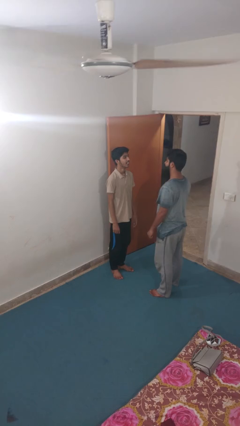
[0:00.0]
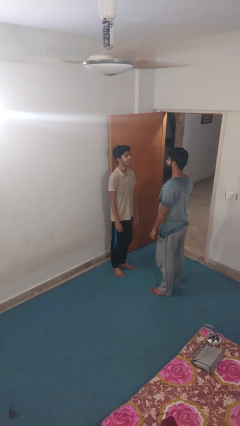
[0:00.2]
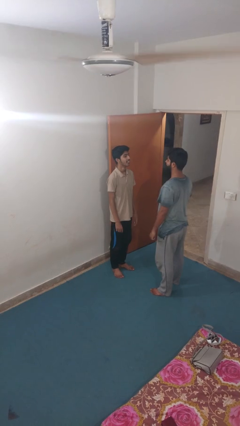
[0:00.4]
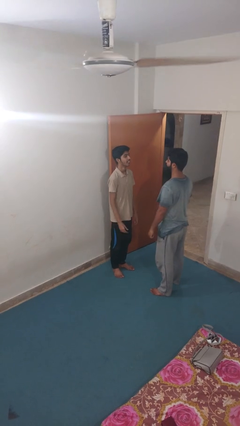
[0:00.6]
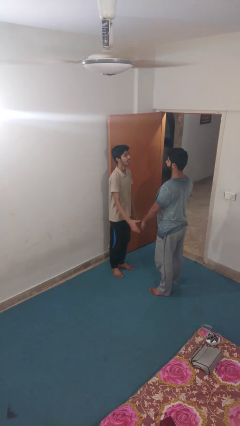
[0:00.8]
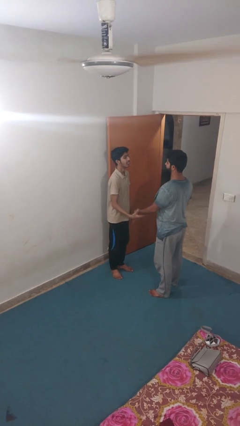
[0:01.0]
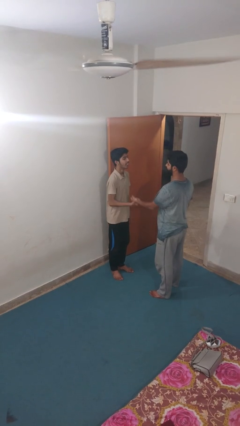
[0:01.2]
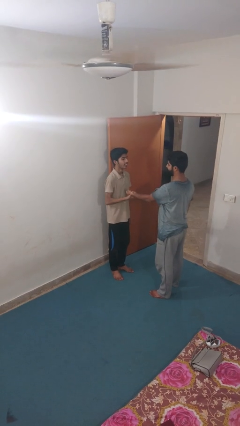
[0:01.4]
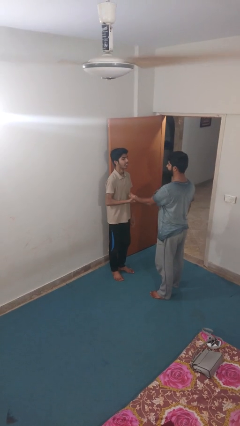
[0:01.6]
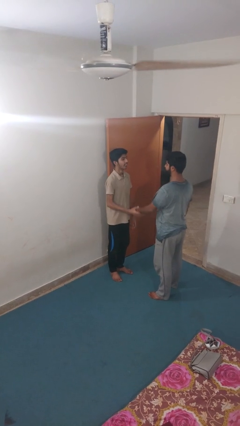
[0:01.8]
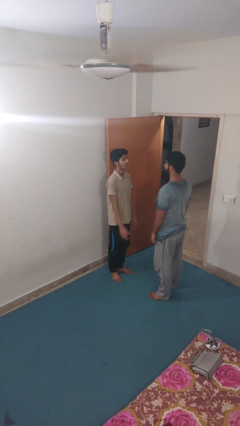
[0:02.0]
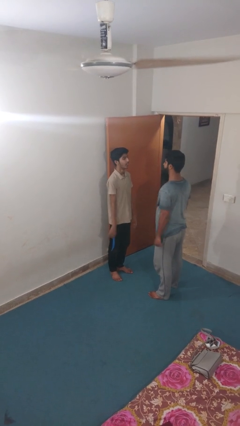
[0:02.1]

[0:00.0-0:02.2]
person grabs person by forearm

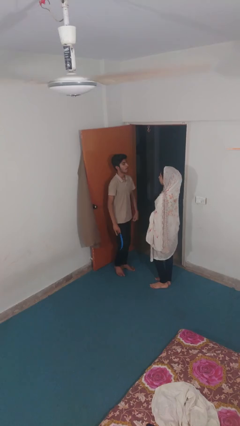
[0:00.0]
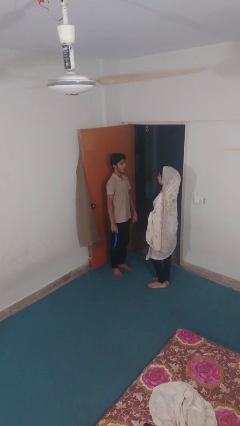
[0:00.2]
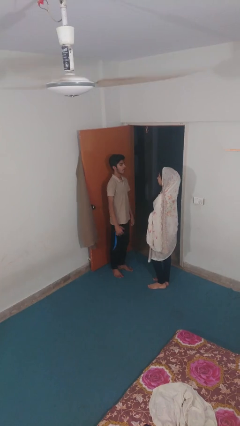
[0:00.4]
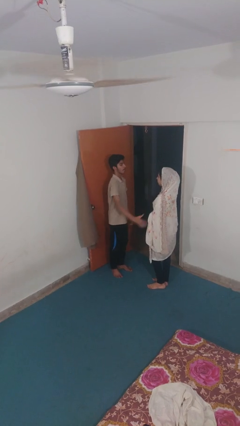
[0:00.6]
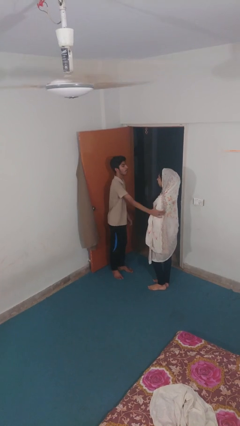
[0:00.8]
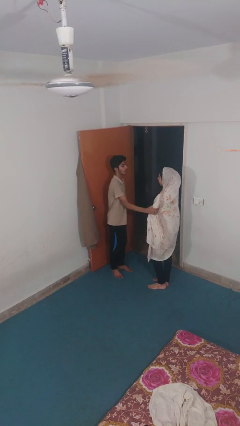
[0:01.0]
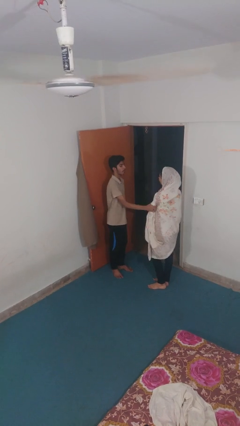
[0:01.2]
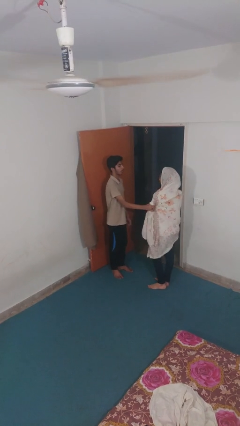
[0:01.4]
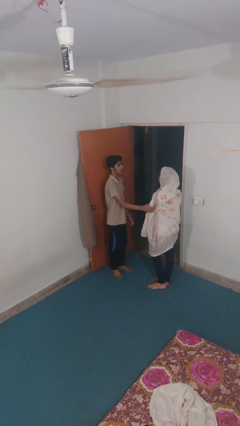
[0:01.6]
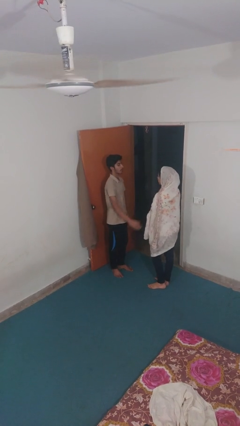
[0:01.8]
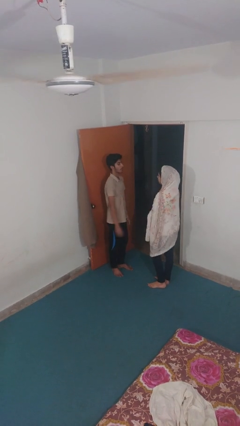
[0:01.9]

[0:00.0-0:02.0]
person grabs person by bicep

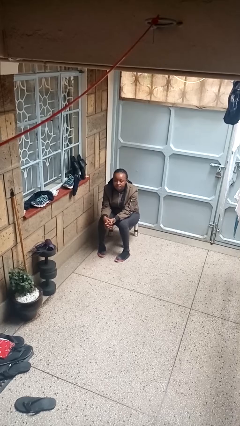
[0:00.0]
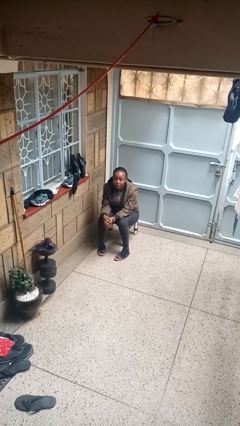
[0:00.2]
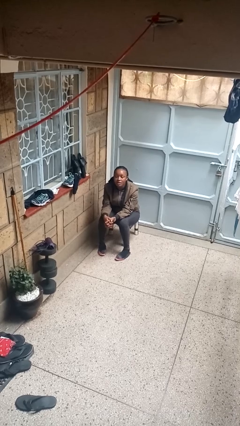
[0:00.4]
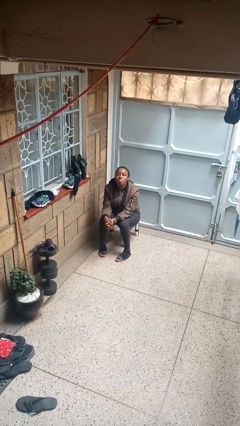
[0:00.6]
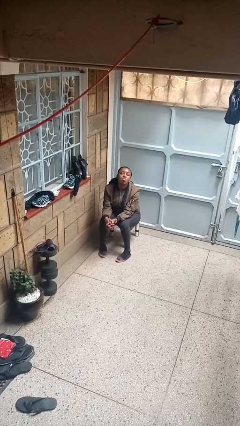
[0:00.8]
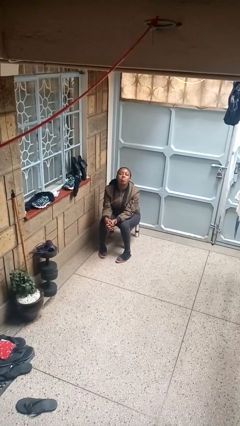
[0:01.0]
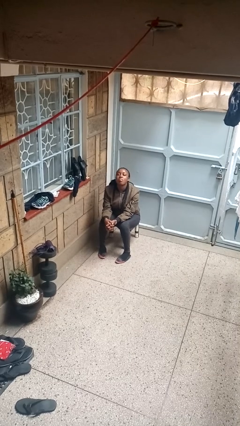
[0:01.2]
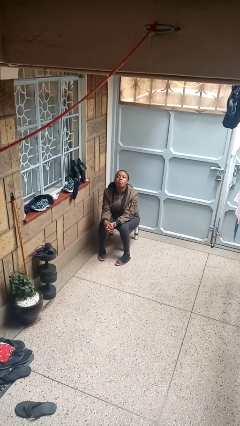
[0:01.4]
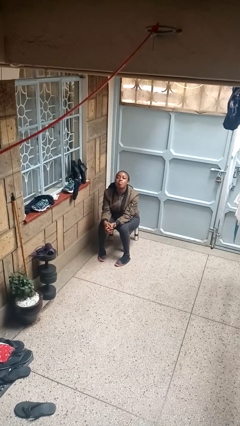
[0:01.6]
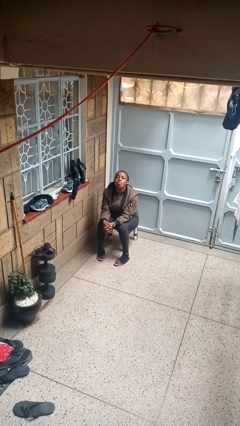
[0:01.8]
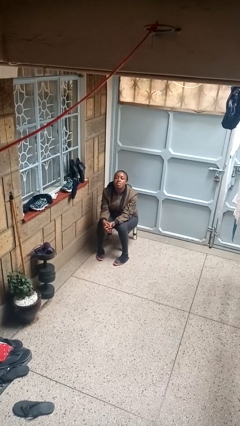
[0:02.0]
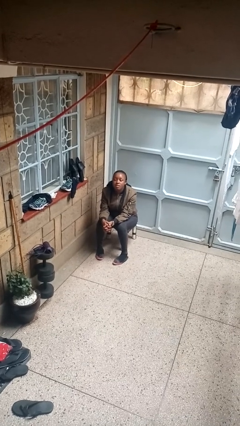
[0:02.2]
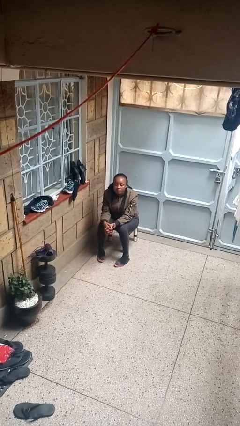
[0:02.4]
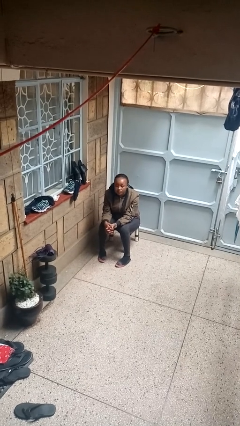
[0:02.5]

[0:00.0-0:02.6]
person sticks out tongue

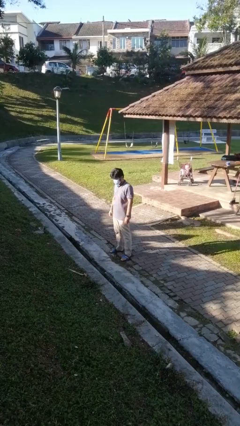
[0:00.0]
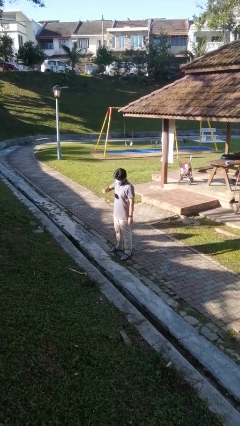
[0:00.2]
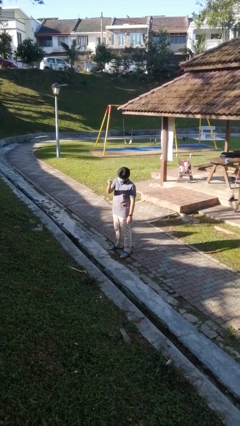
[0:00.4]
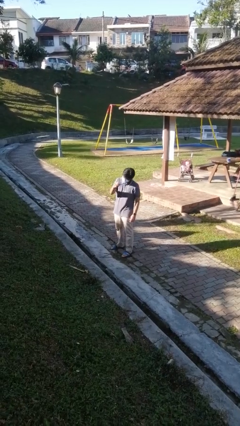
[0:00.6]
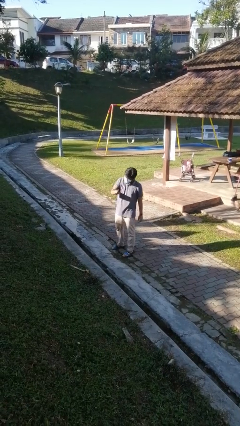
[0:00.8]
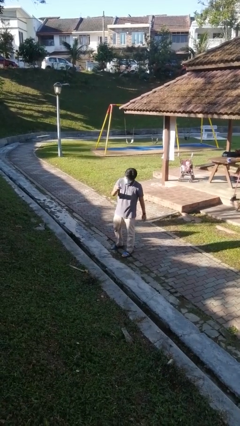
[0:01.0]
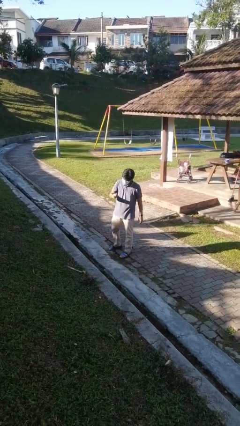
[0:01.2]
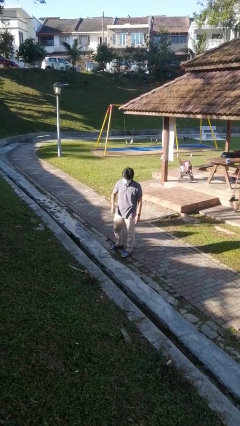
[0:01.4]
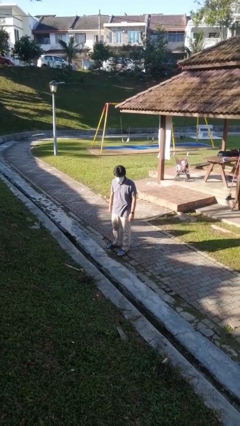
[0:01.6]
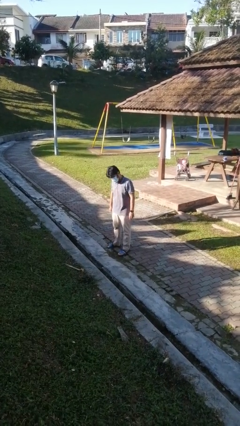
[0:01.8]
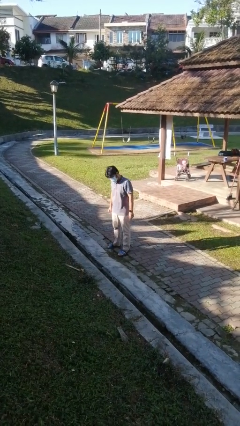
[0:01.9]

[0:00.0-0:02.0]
person snaps fingers

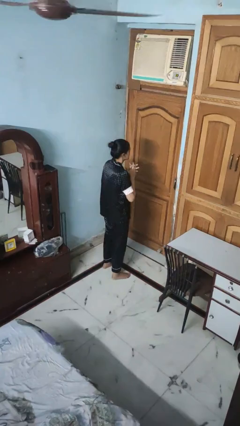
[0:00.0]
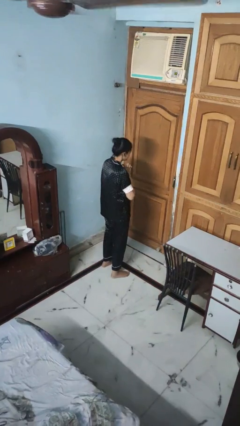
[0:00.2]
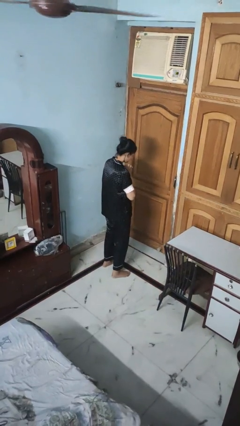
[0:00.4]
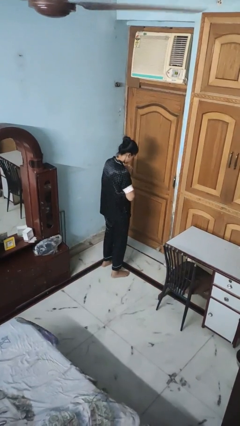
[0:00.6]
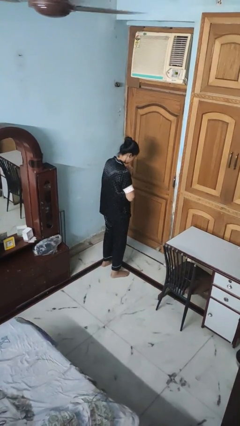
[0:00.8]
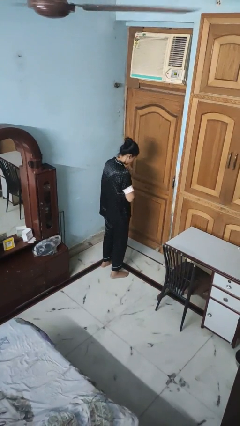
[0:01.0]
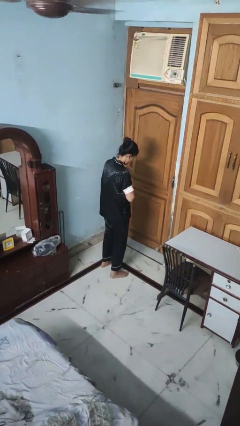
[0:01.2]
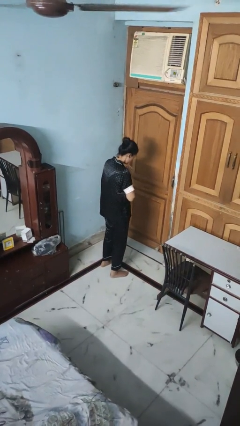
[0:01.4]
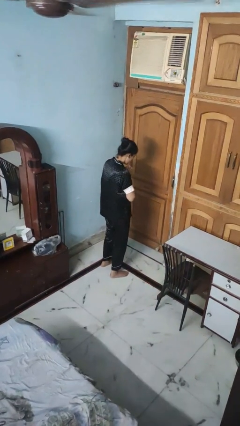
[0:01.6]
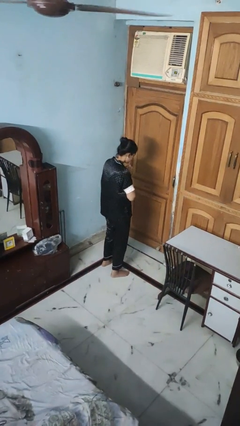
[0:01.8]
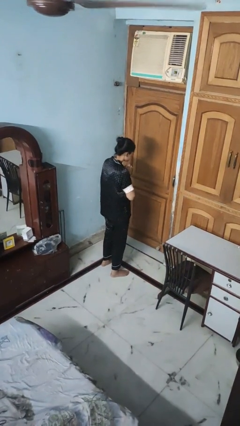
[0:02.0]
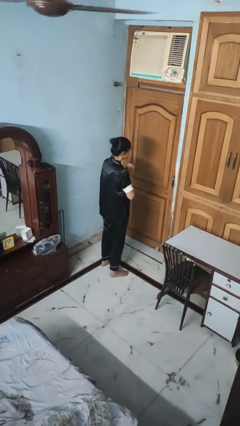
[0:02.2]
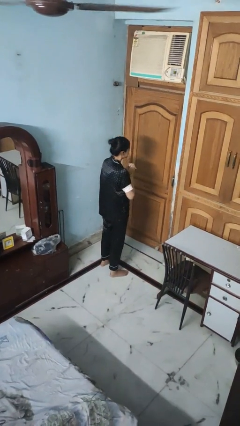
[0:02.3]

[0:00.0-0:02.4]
person prays

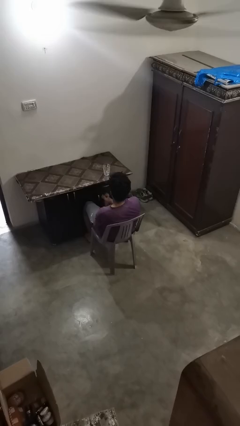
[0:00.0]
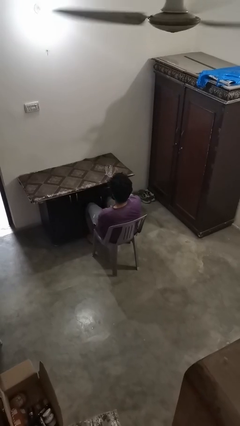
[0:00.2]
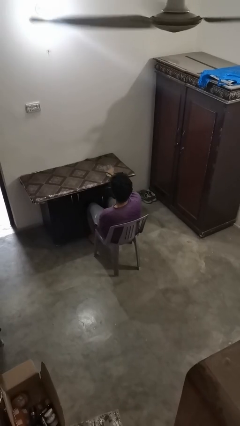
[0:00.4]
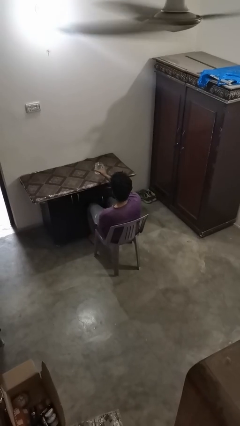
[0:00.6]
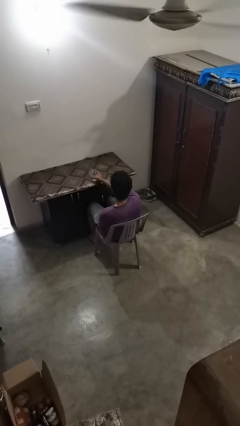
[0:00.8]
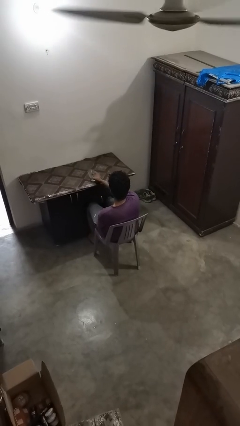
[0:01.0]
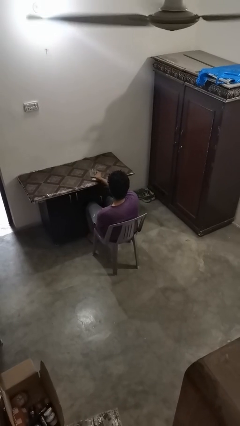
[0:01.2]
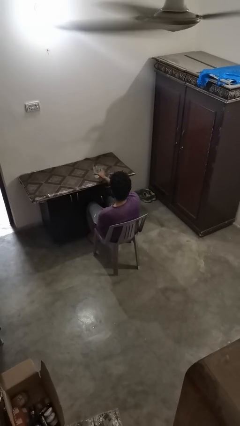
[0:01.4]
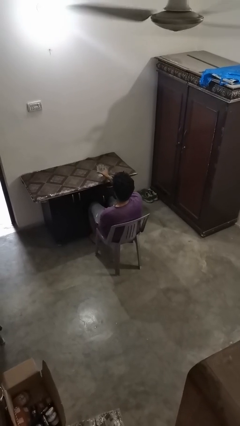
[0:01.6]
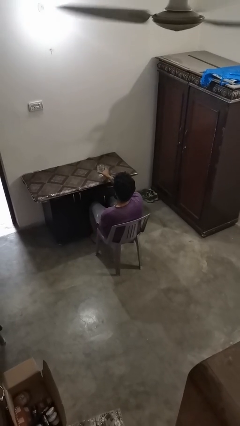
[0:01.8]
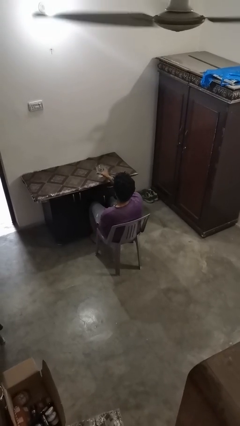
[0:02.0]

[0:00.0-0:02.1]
person knocks over glass

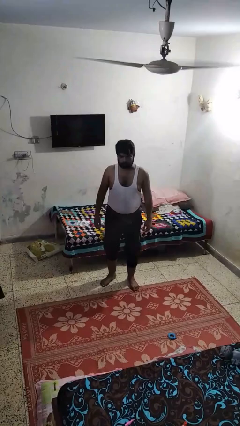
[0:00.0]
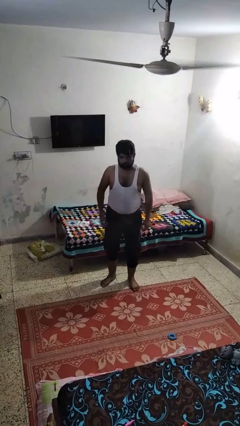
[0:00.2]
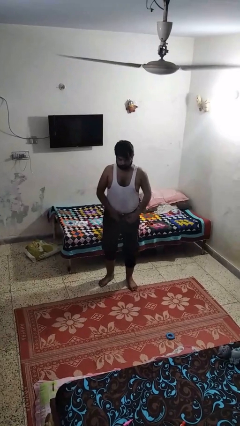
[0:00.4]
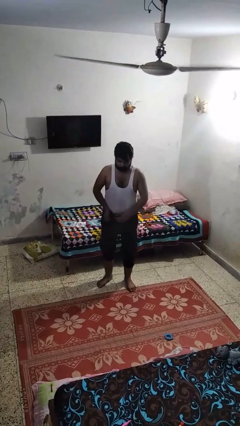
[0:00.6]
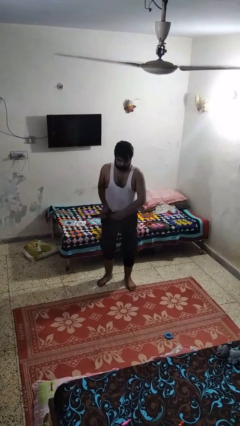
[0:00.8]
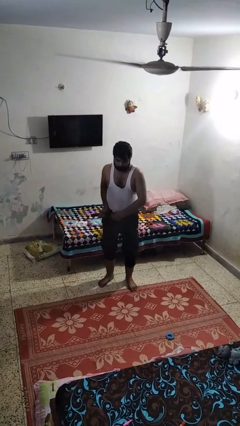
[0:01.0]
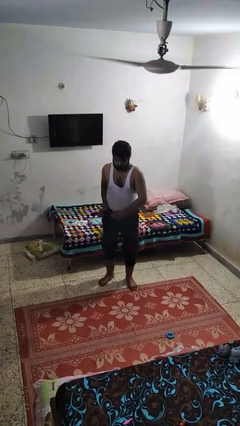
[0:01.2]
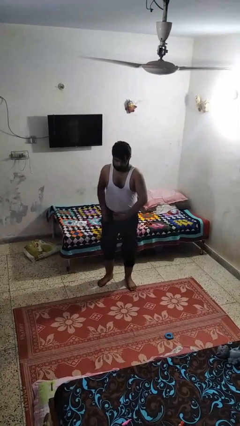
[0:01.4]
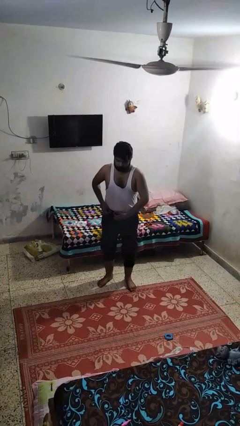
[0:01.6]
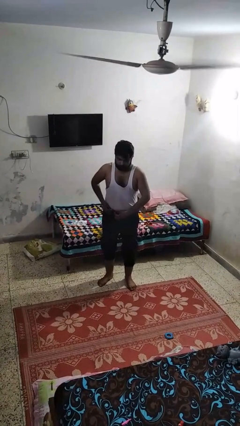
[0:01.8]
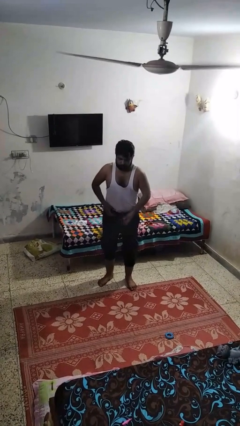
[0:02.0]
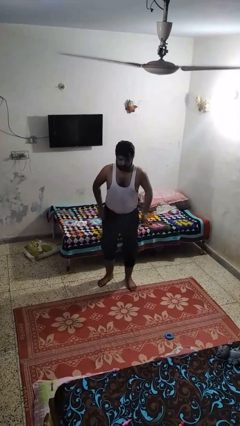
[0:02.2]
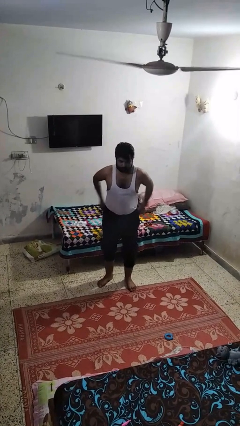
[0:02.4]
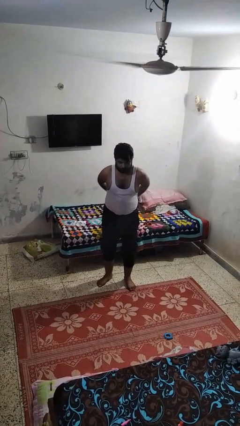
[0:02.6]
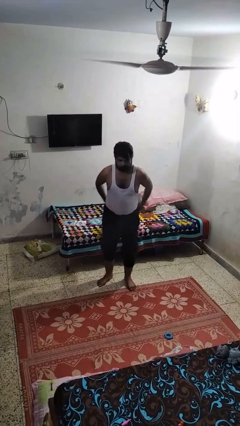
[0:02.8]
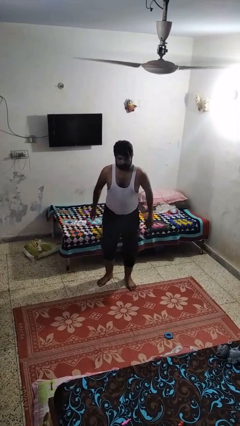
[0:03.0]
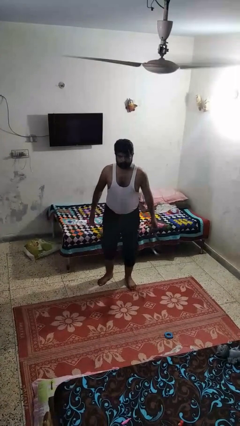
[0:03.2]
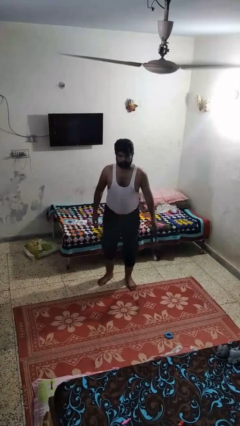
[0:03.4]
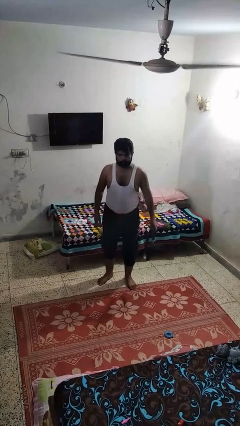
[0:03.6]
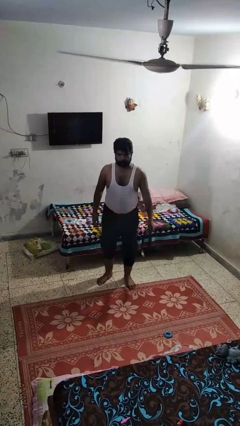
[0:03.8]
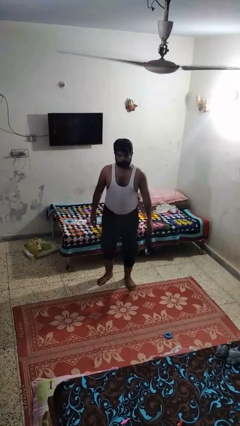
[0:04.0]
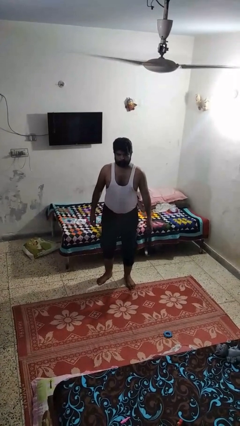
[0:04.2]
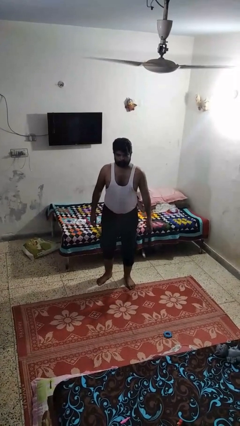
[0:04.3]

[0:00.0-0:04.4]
person takes off belt
